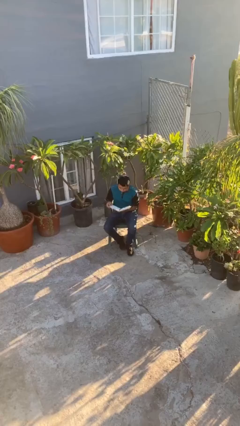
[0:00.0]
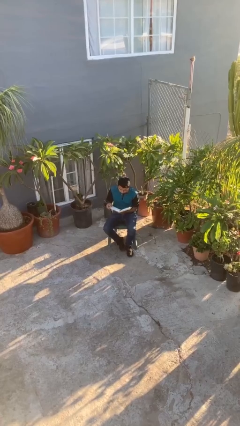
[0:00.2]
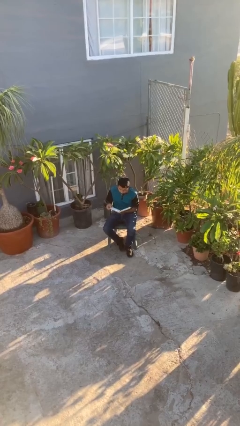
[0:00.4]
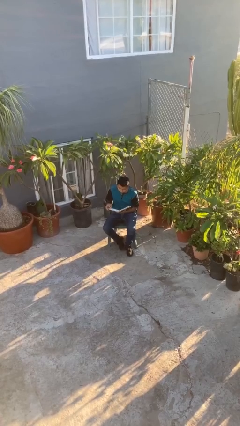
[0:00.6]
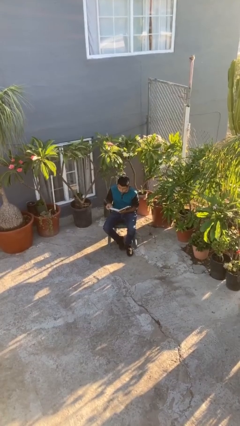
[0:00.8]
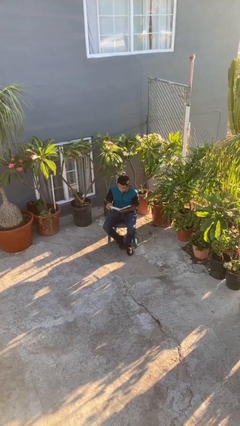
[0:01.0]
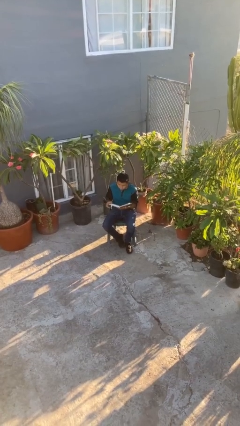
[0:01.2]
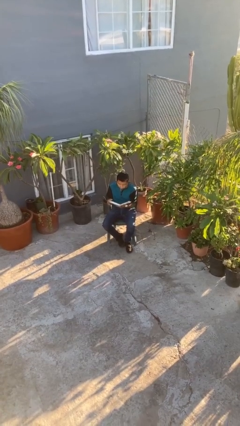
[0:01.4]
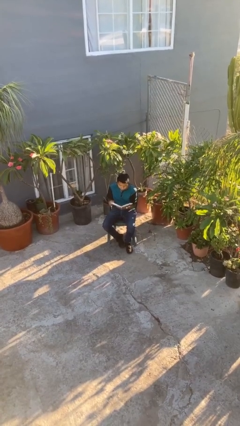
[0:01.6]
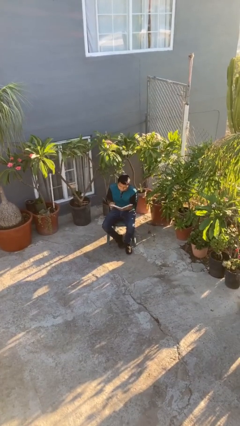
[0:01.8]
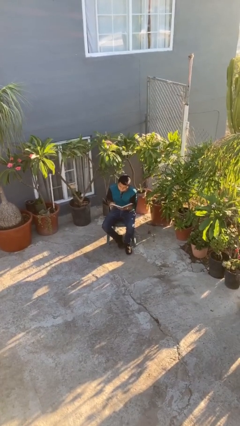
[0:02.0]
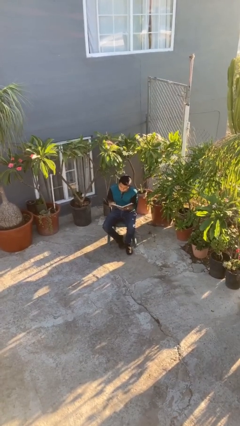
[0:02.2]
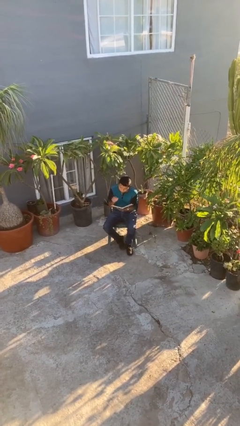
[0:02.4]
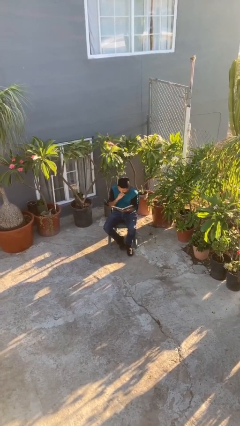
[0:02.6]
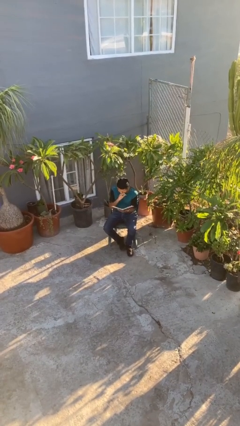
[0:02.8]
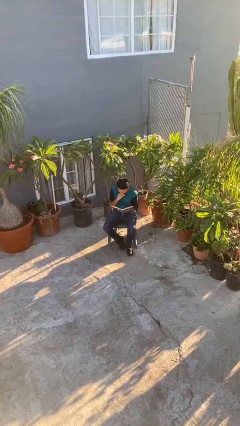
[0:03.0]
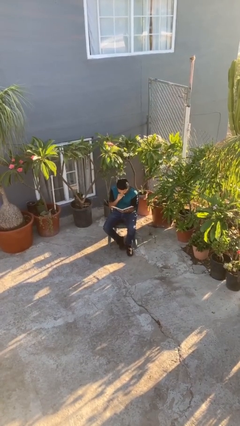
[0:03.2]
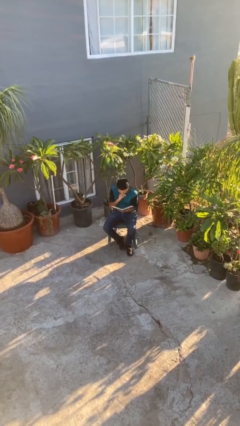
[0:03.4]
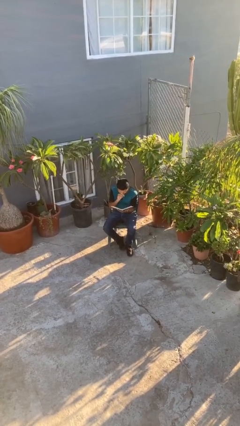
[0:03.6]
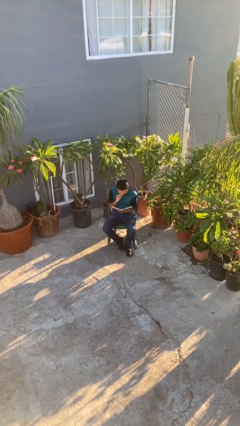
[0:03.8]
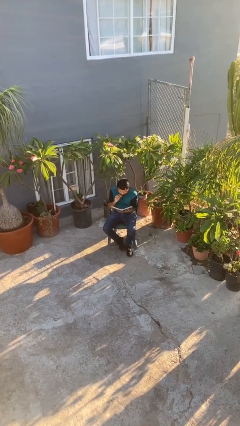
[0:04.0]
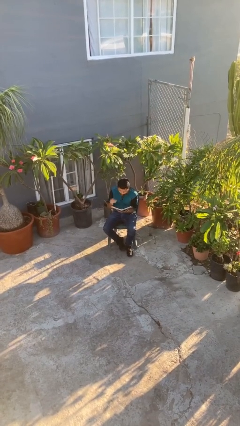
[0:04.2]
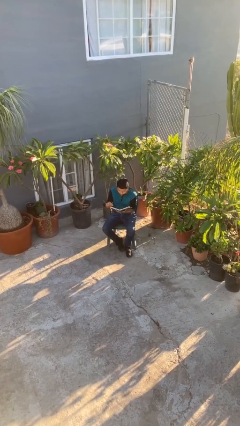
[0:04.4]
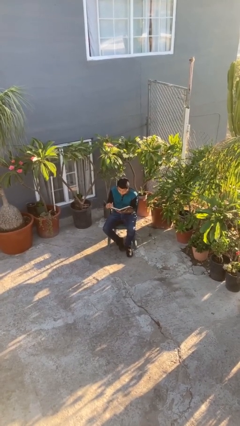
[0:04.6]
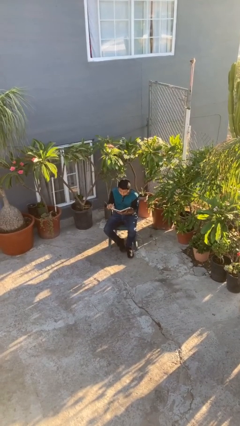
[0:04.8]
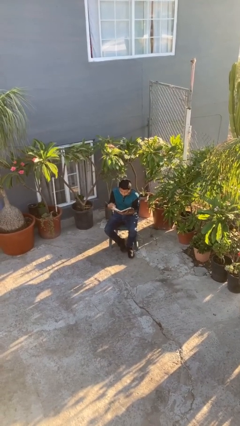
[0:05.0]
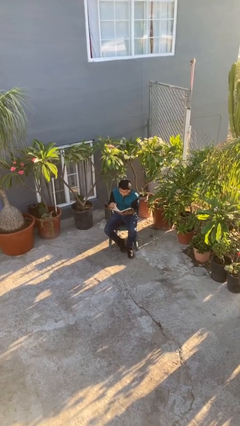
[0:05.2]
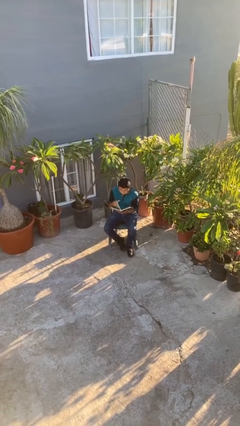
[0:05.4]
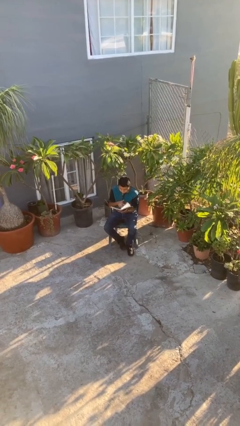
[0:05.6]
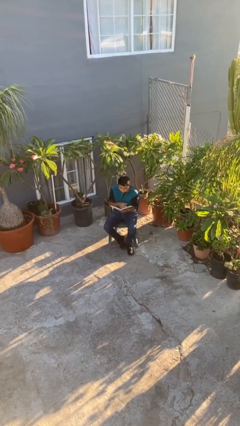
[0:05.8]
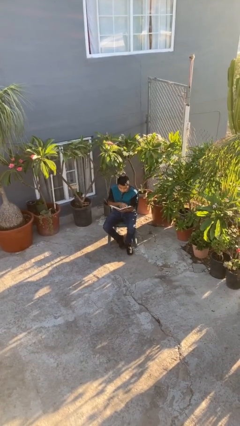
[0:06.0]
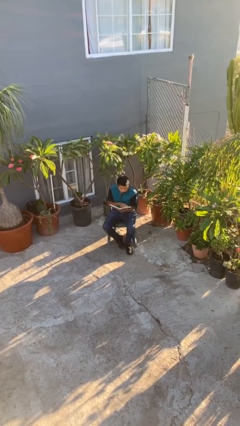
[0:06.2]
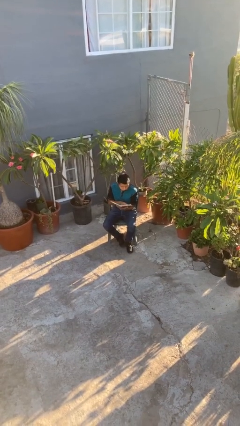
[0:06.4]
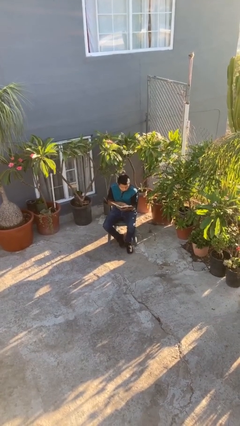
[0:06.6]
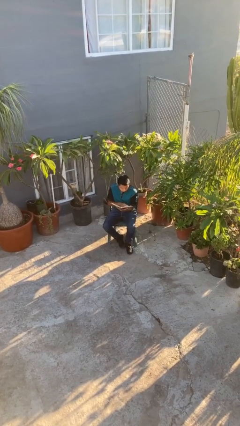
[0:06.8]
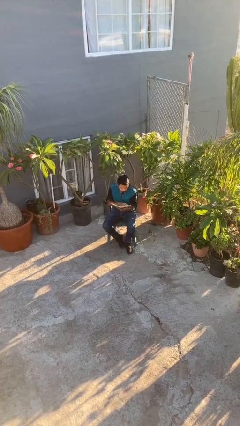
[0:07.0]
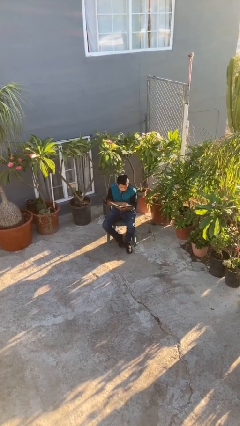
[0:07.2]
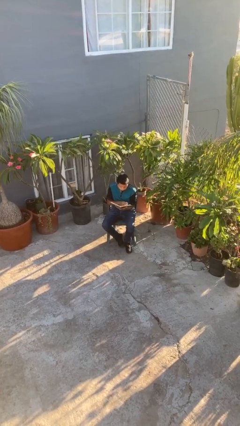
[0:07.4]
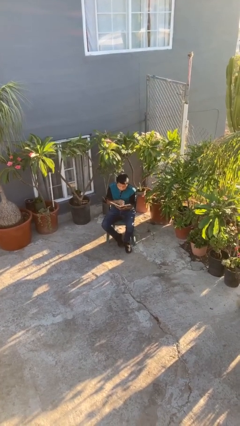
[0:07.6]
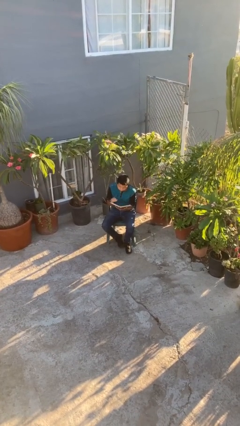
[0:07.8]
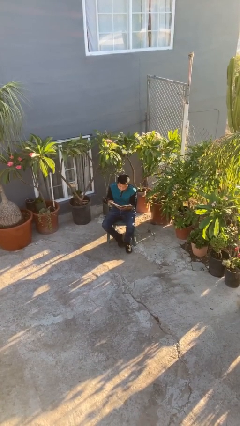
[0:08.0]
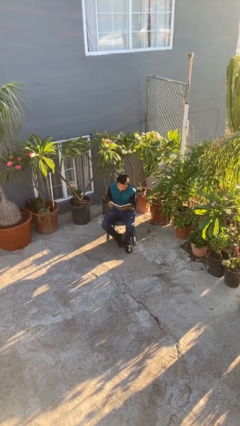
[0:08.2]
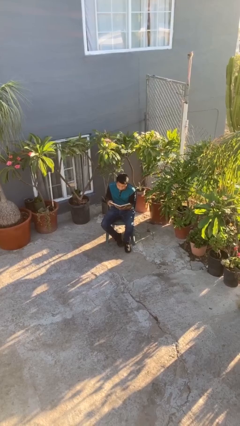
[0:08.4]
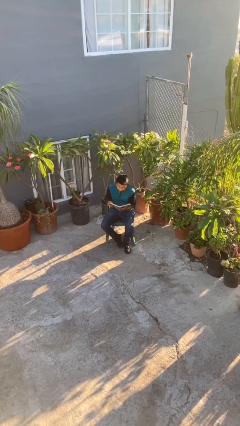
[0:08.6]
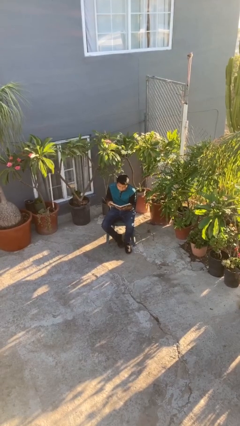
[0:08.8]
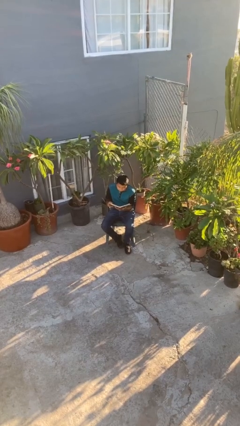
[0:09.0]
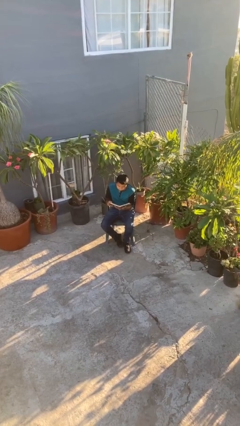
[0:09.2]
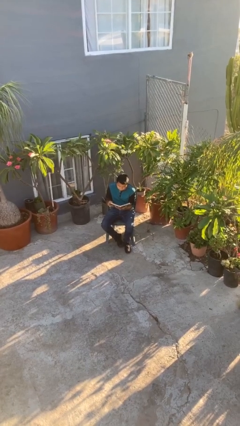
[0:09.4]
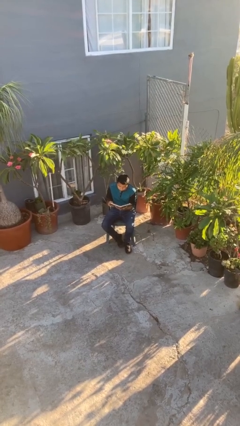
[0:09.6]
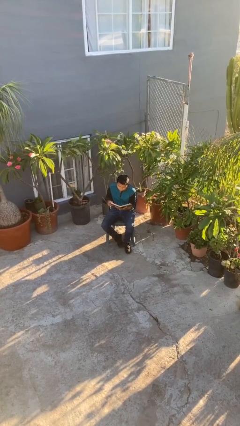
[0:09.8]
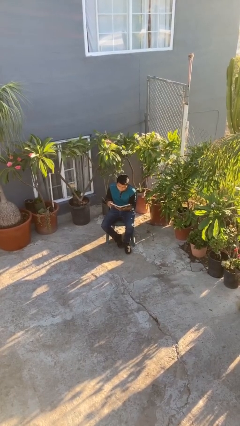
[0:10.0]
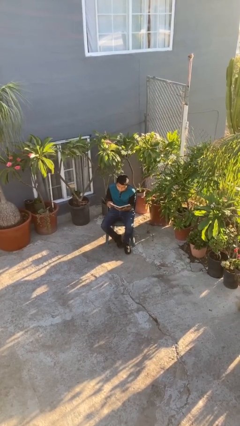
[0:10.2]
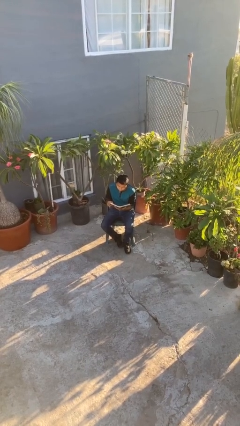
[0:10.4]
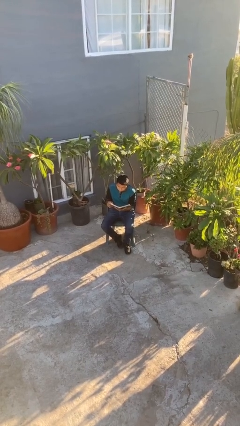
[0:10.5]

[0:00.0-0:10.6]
person reads document

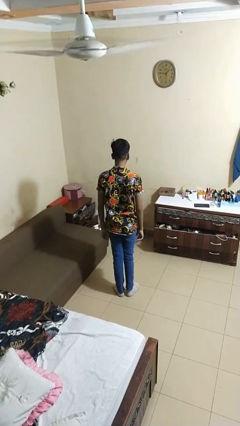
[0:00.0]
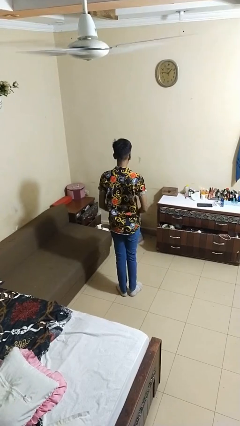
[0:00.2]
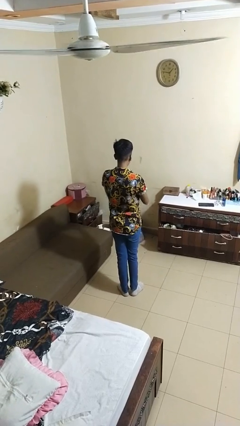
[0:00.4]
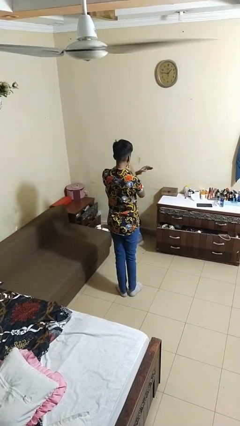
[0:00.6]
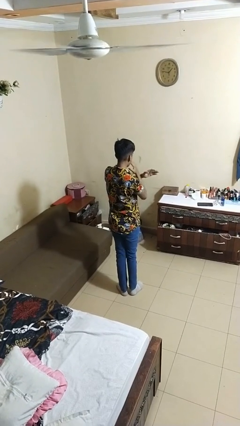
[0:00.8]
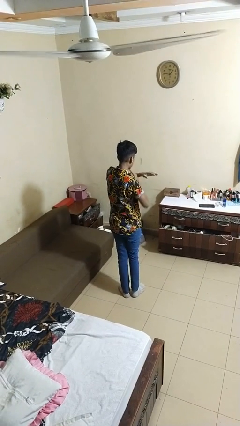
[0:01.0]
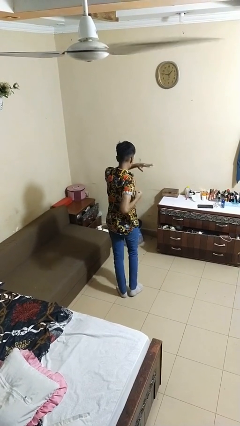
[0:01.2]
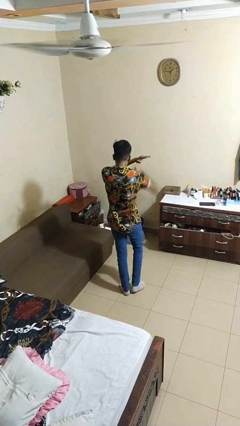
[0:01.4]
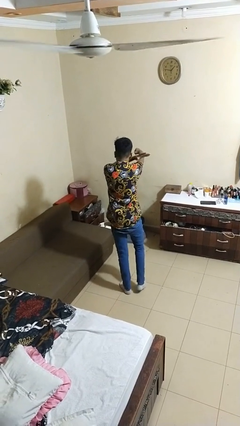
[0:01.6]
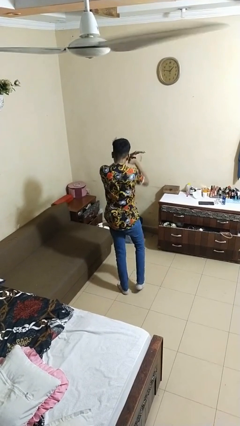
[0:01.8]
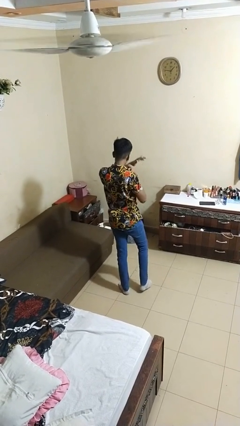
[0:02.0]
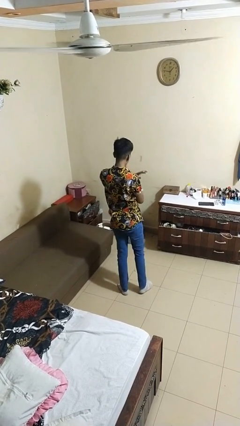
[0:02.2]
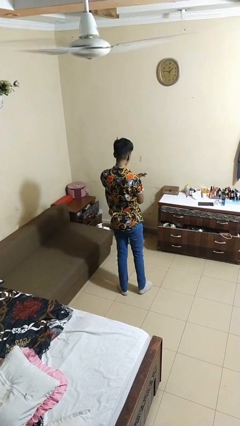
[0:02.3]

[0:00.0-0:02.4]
person karate chop

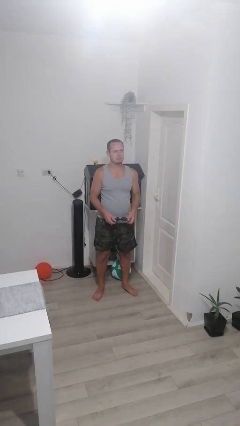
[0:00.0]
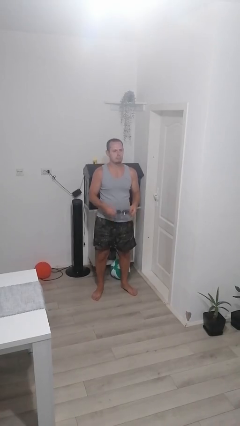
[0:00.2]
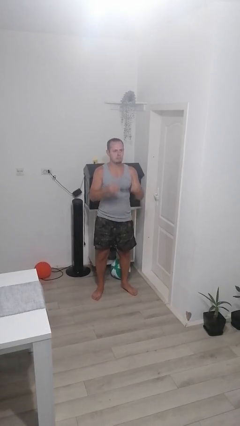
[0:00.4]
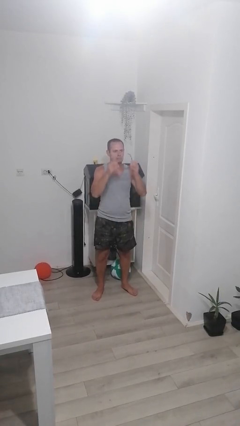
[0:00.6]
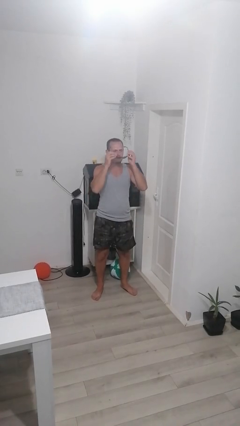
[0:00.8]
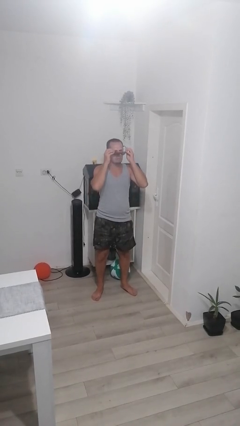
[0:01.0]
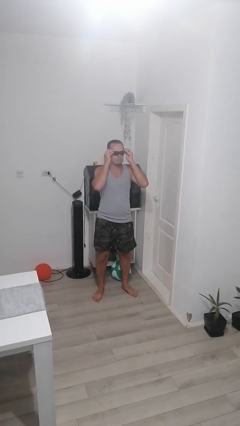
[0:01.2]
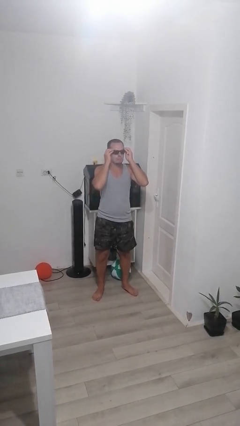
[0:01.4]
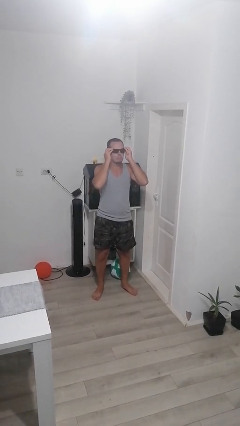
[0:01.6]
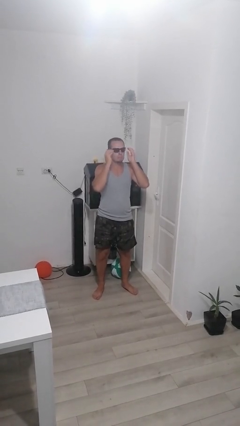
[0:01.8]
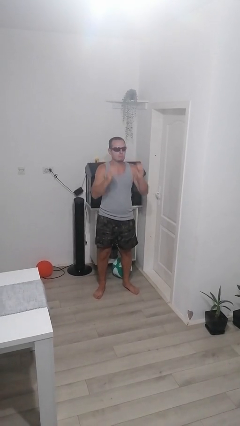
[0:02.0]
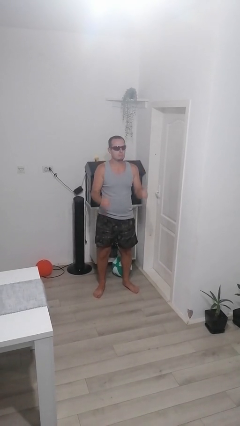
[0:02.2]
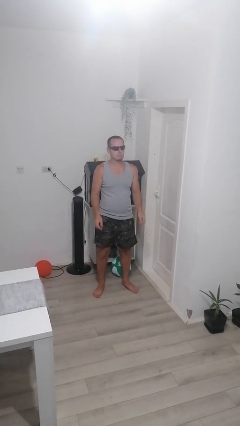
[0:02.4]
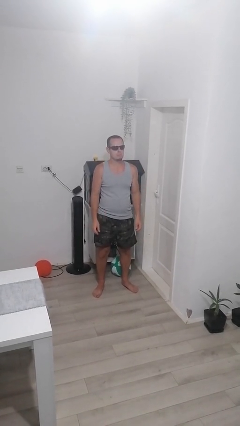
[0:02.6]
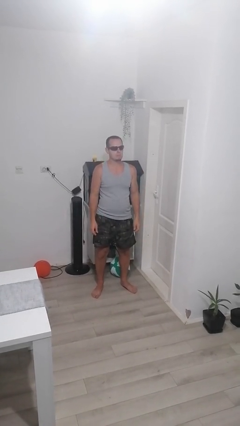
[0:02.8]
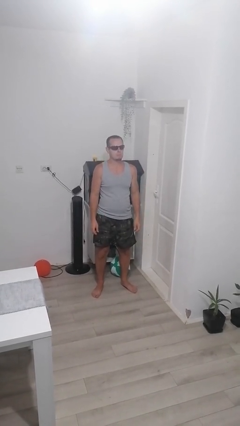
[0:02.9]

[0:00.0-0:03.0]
person puts on sunglasses

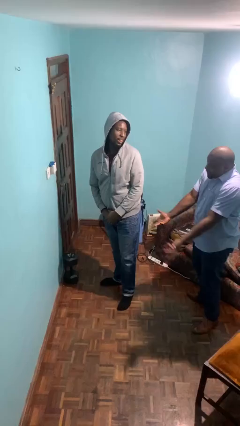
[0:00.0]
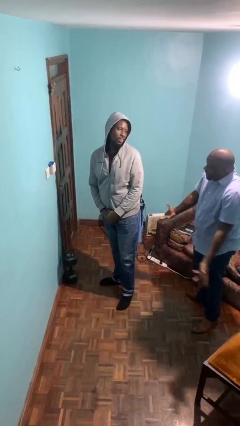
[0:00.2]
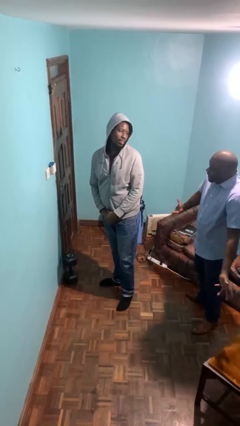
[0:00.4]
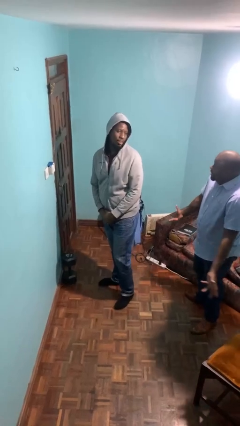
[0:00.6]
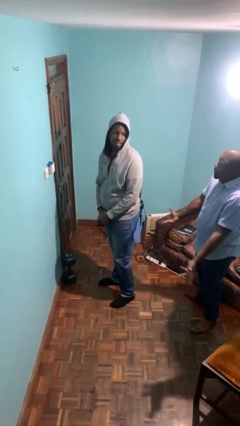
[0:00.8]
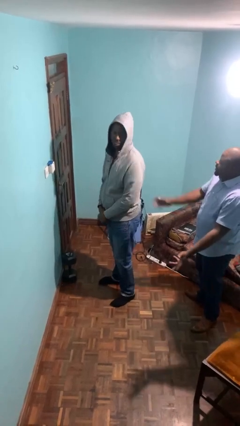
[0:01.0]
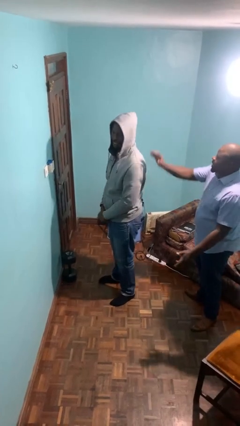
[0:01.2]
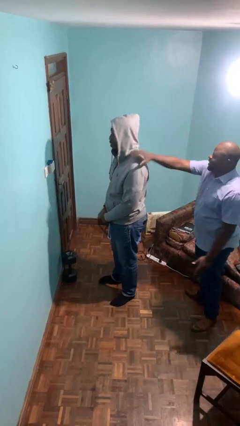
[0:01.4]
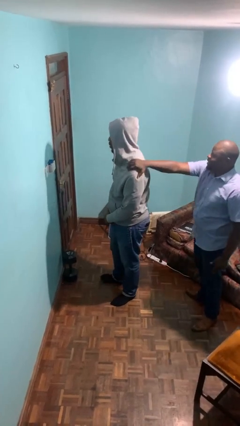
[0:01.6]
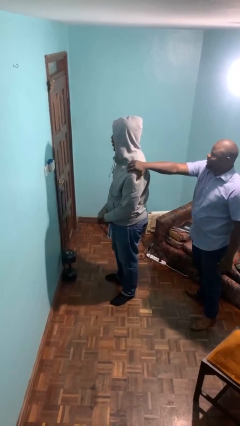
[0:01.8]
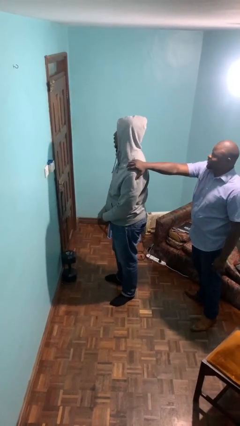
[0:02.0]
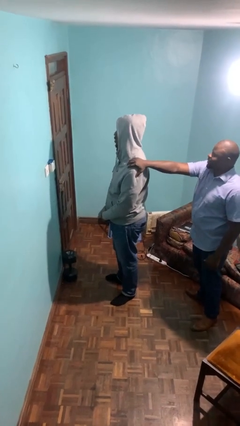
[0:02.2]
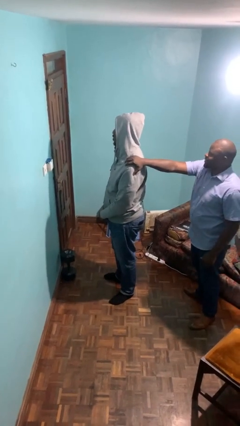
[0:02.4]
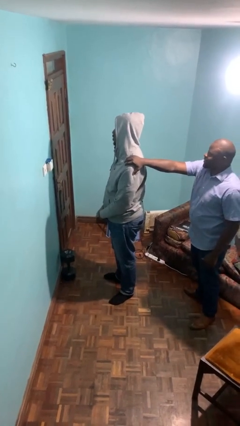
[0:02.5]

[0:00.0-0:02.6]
person grabs person by shoulder
